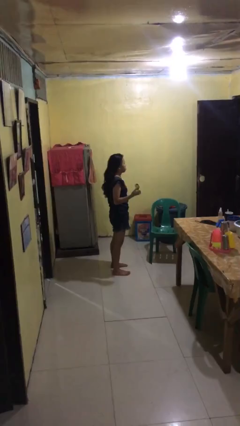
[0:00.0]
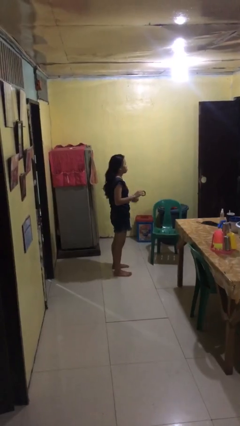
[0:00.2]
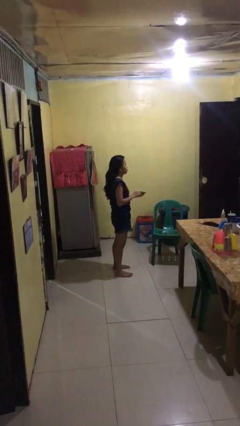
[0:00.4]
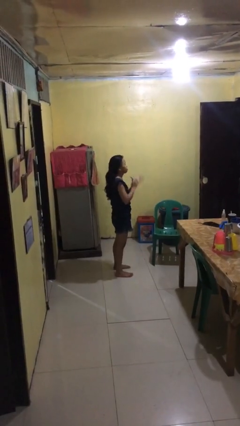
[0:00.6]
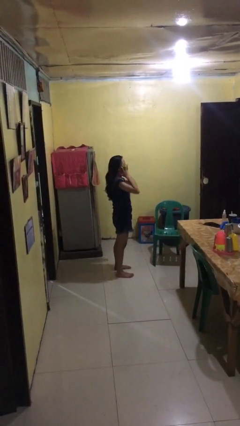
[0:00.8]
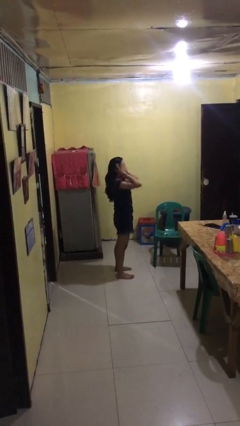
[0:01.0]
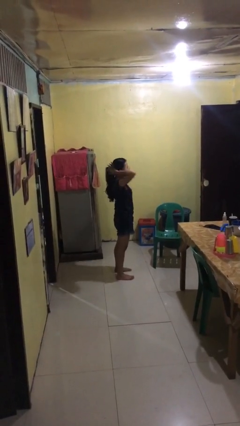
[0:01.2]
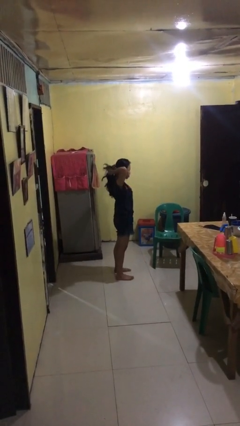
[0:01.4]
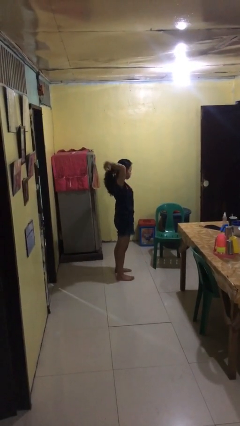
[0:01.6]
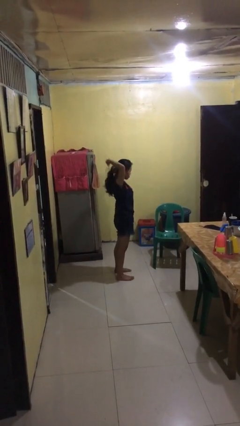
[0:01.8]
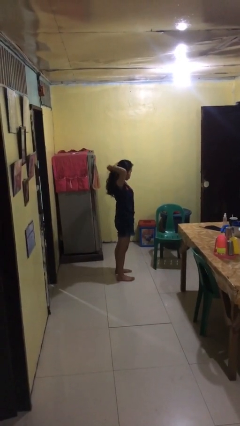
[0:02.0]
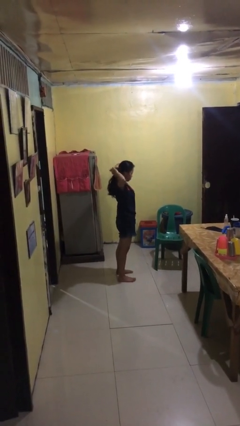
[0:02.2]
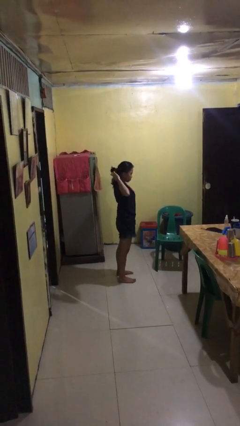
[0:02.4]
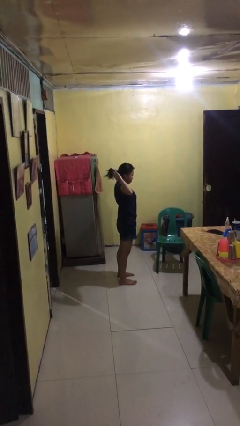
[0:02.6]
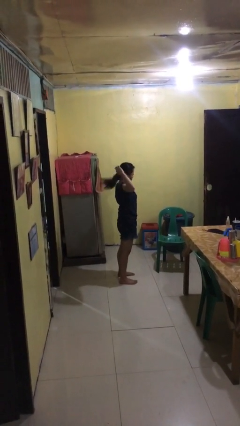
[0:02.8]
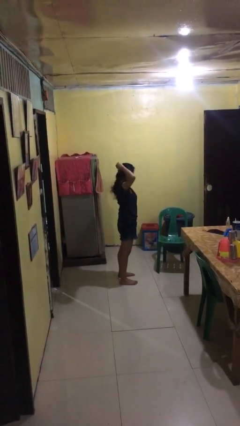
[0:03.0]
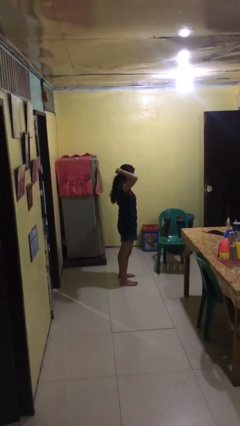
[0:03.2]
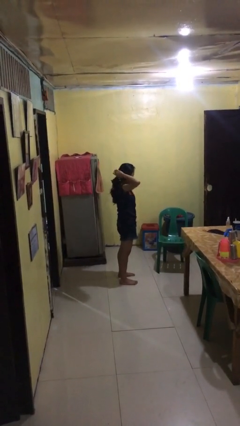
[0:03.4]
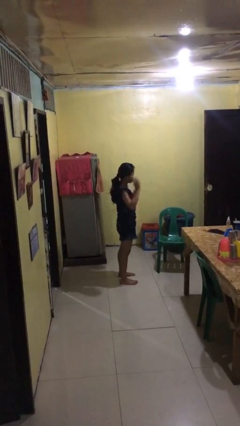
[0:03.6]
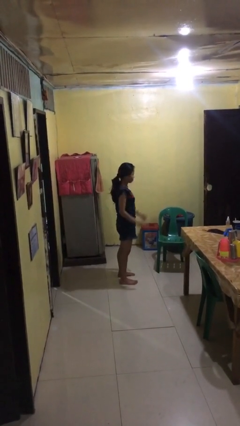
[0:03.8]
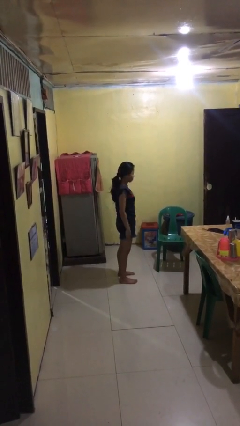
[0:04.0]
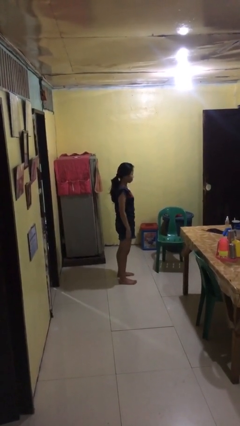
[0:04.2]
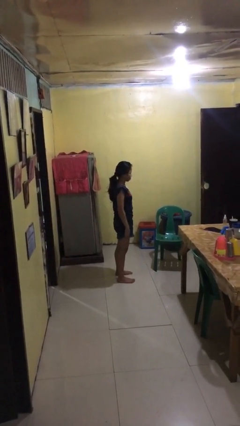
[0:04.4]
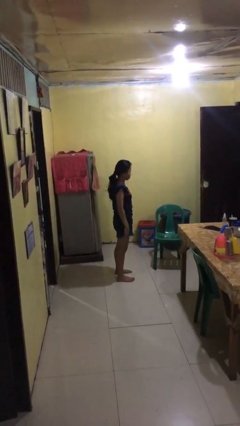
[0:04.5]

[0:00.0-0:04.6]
person puts hair in ponytail

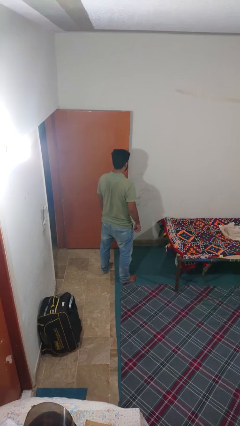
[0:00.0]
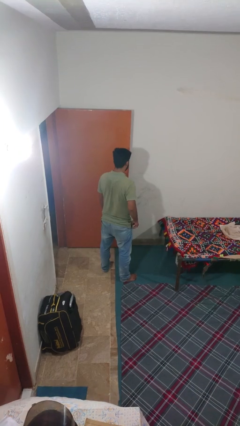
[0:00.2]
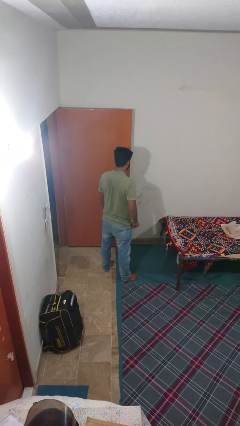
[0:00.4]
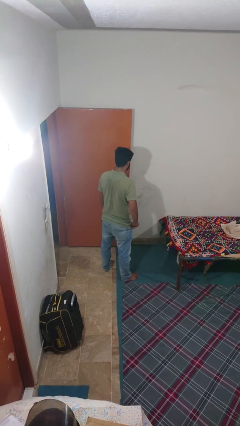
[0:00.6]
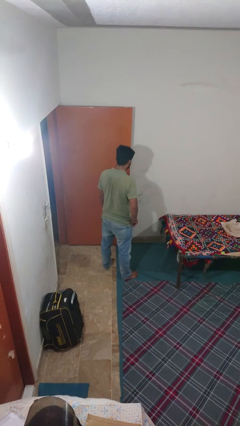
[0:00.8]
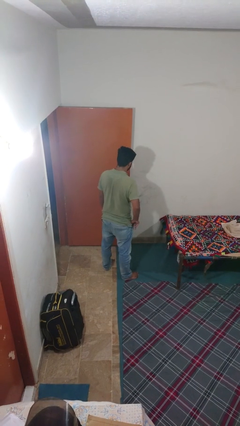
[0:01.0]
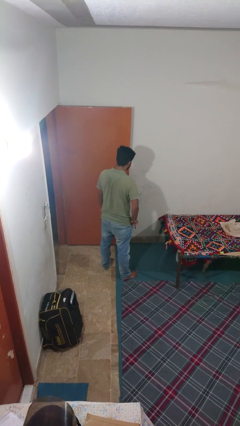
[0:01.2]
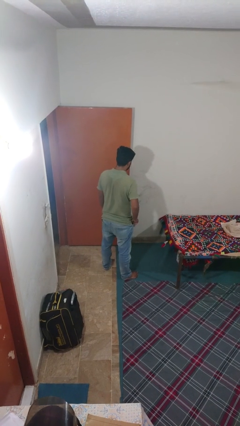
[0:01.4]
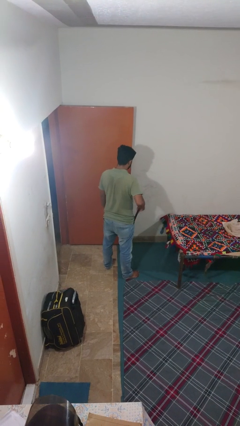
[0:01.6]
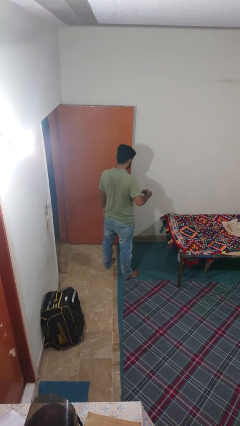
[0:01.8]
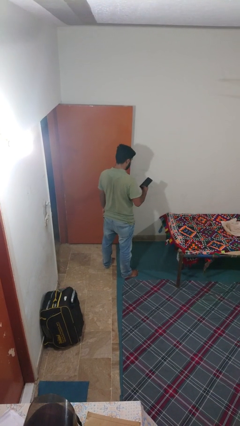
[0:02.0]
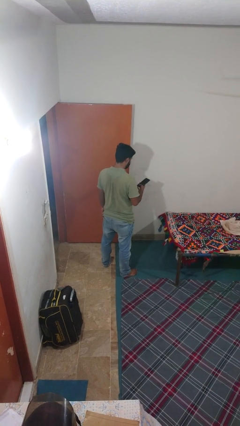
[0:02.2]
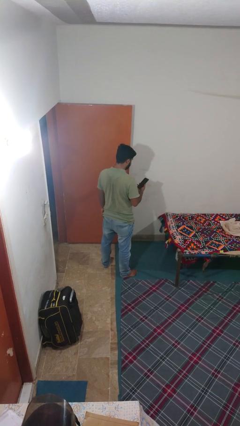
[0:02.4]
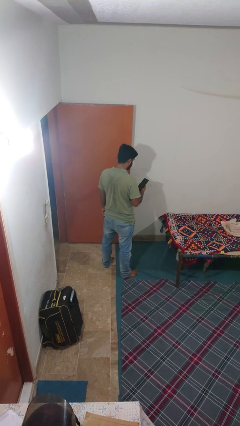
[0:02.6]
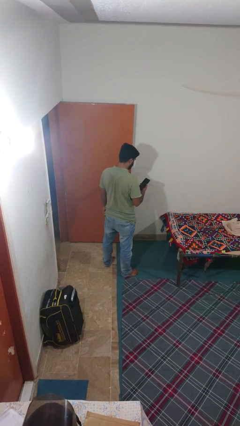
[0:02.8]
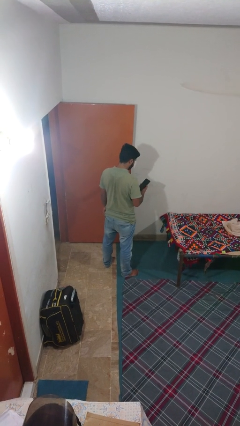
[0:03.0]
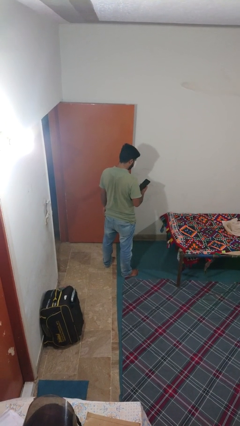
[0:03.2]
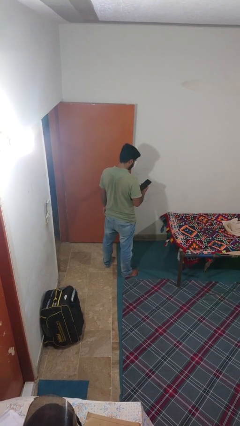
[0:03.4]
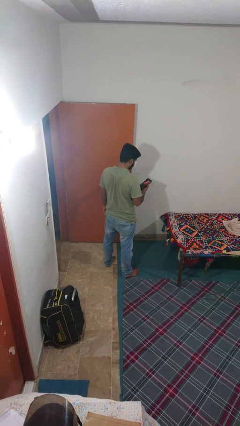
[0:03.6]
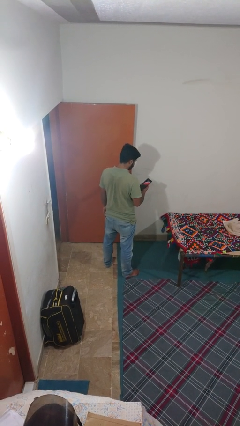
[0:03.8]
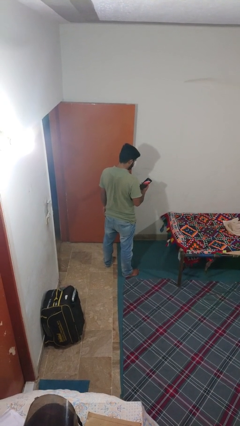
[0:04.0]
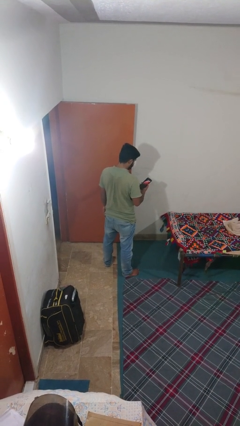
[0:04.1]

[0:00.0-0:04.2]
person takes phone from pocket

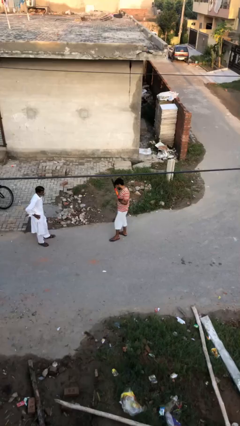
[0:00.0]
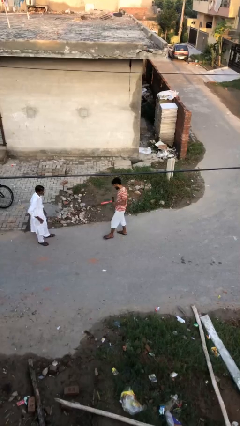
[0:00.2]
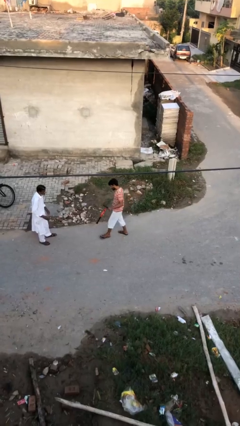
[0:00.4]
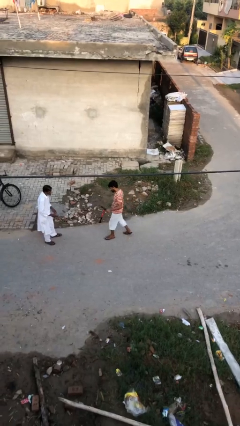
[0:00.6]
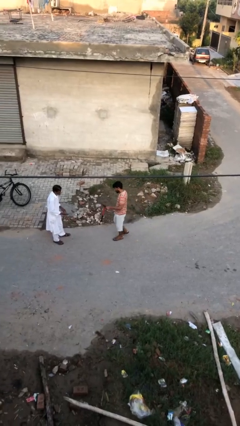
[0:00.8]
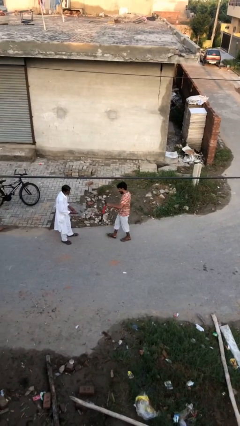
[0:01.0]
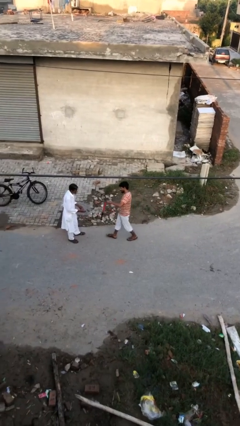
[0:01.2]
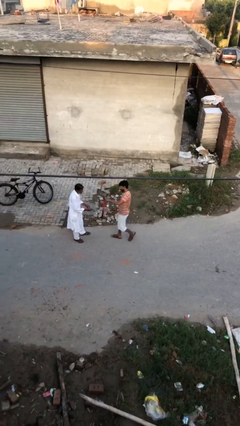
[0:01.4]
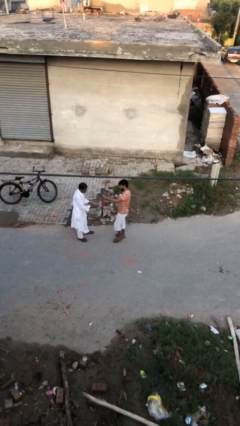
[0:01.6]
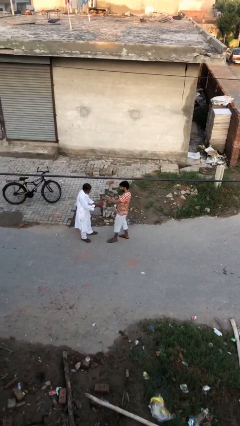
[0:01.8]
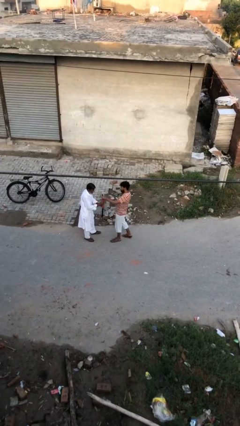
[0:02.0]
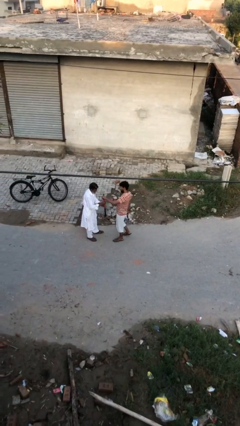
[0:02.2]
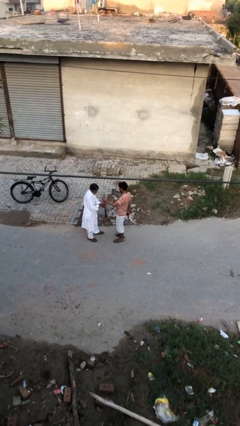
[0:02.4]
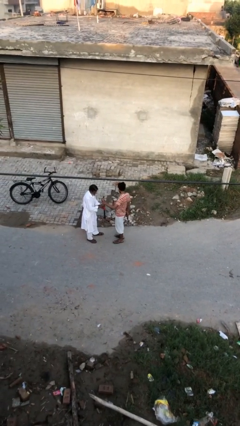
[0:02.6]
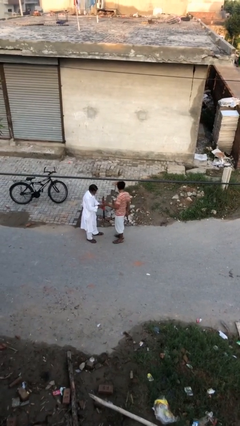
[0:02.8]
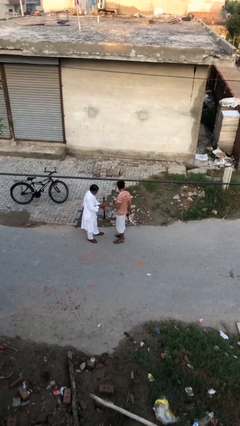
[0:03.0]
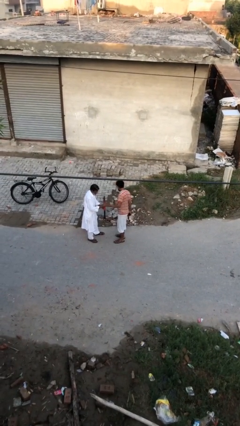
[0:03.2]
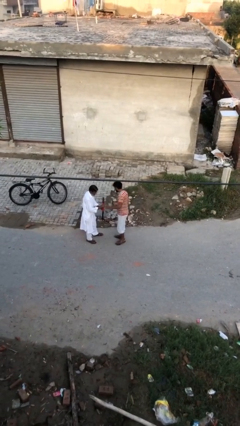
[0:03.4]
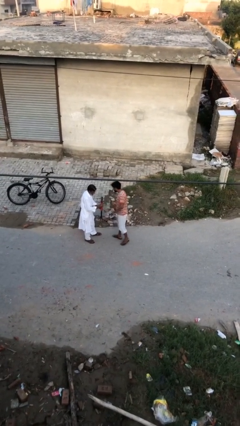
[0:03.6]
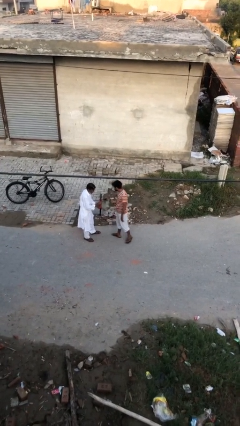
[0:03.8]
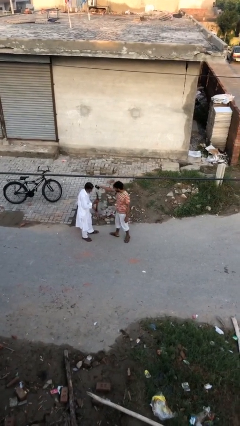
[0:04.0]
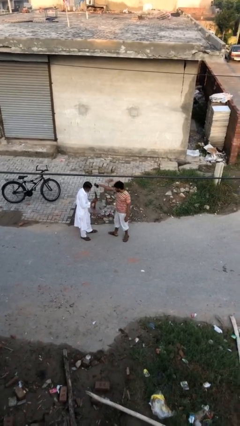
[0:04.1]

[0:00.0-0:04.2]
person transfers object to person

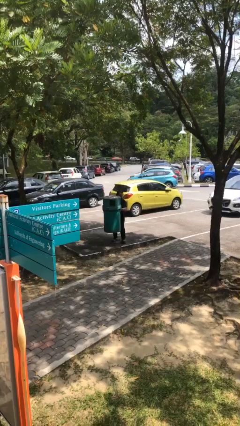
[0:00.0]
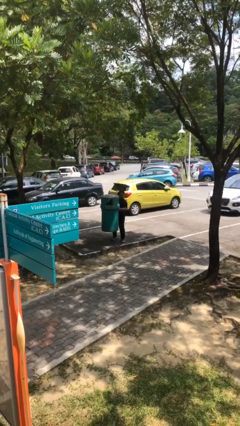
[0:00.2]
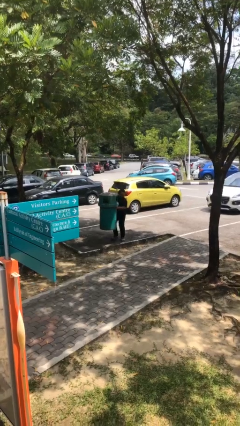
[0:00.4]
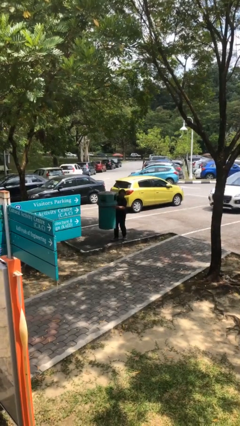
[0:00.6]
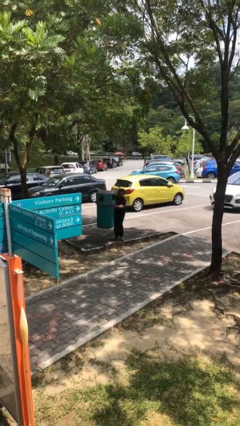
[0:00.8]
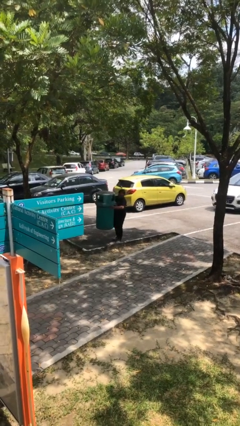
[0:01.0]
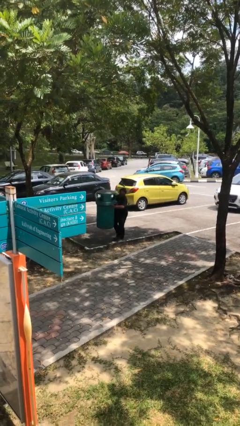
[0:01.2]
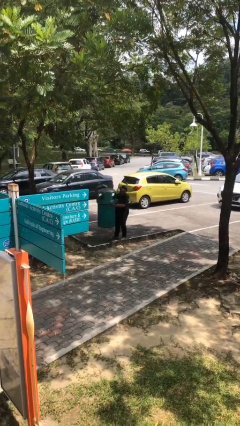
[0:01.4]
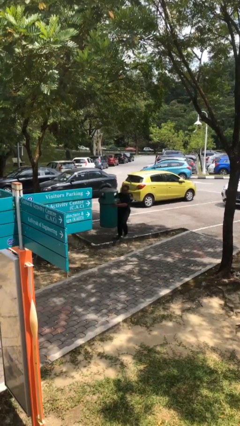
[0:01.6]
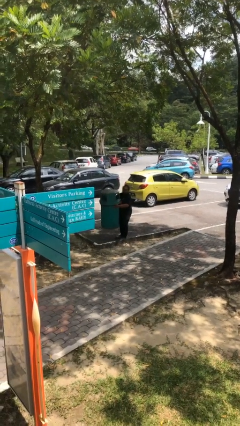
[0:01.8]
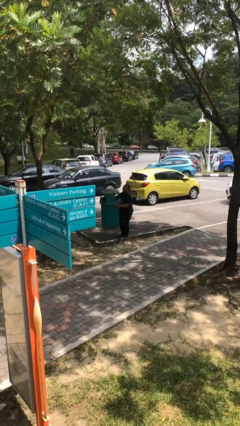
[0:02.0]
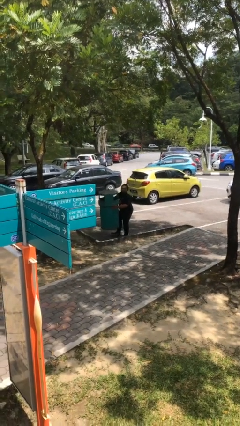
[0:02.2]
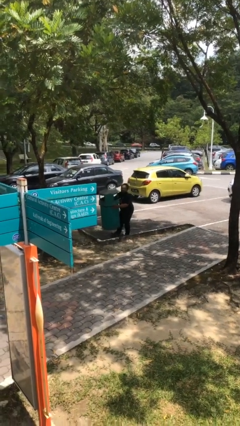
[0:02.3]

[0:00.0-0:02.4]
person carries heavy object

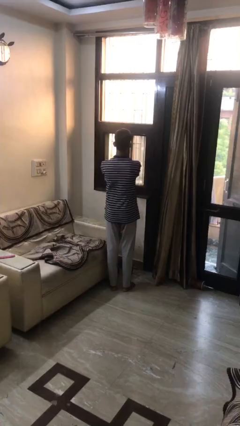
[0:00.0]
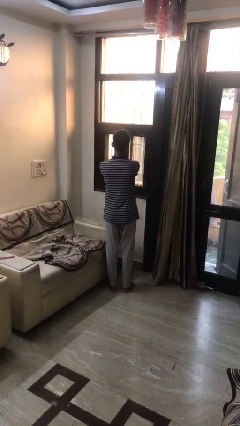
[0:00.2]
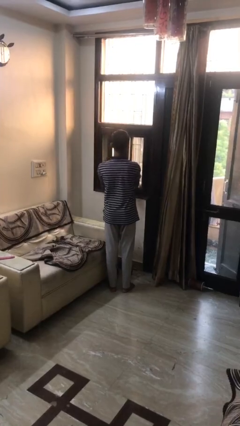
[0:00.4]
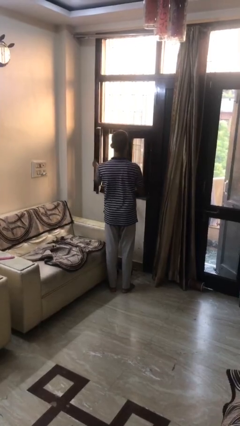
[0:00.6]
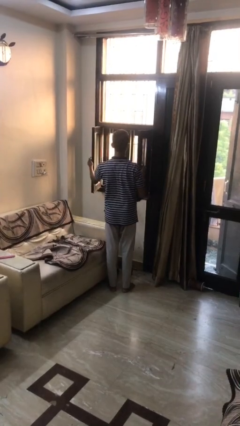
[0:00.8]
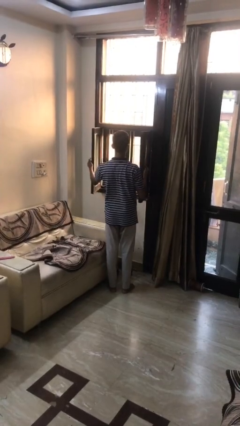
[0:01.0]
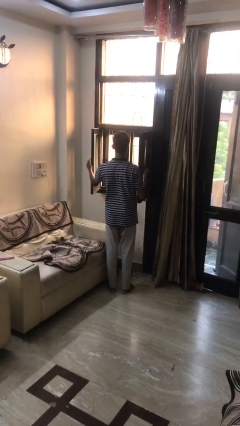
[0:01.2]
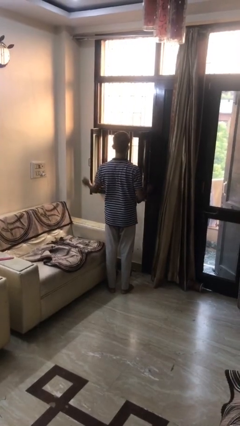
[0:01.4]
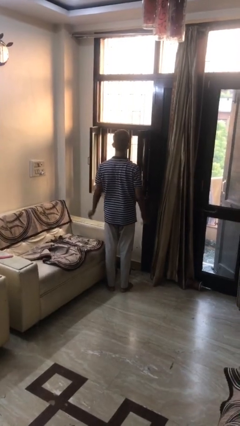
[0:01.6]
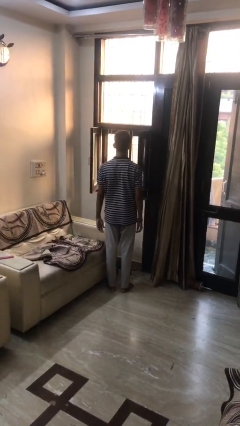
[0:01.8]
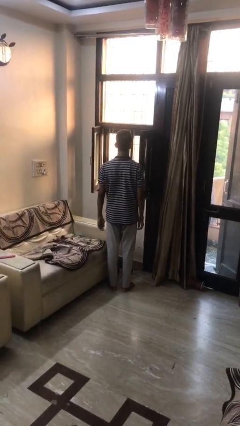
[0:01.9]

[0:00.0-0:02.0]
person opens home window
